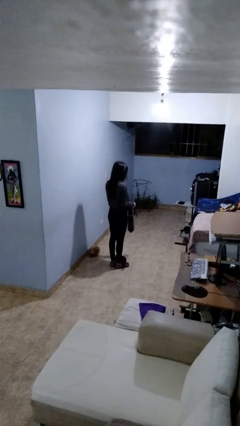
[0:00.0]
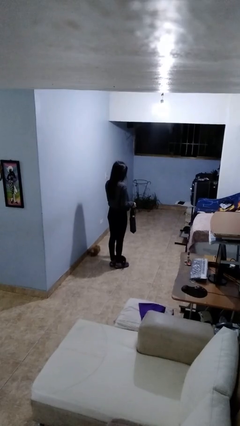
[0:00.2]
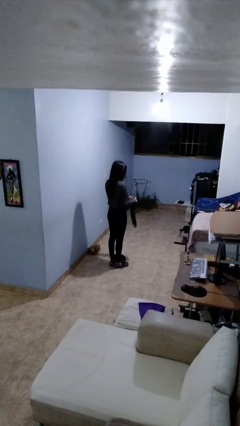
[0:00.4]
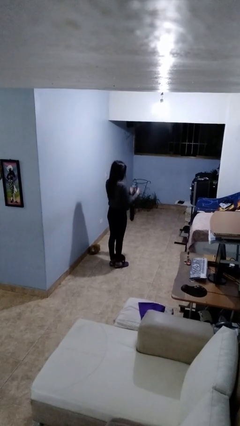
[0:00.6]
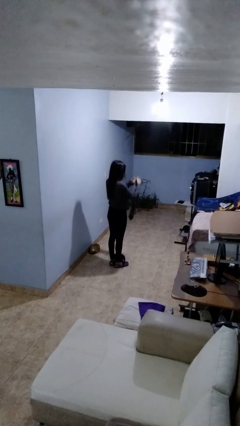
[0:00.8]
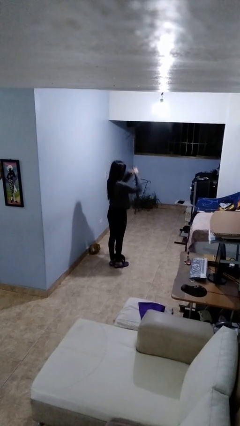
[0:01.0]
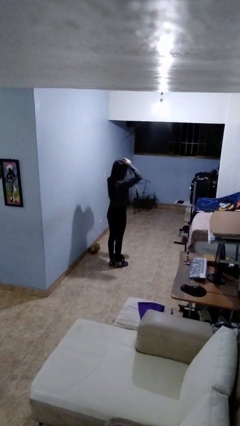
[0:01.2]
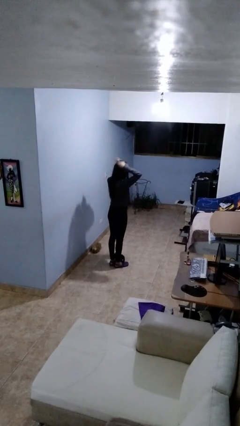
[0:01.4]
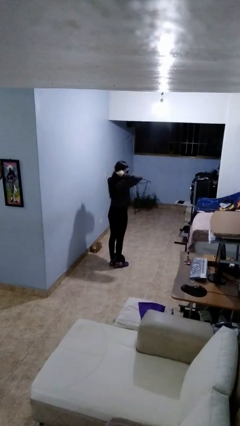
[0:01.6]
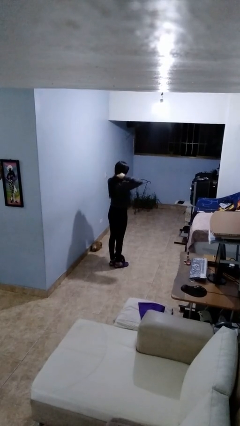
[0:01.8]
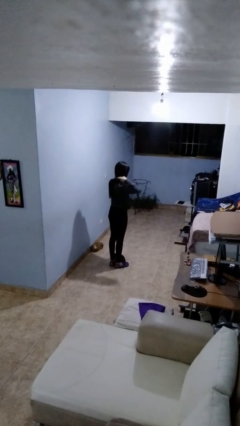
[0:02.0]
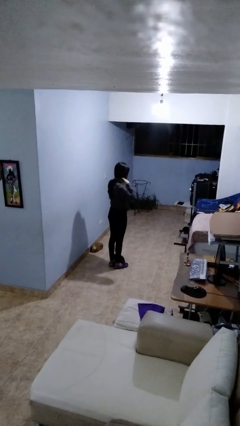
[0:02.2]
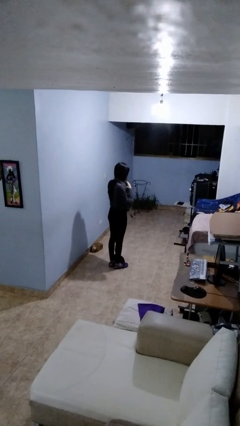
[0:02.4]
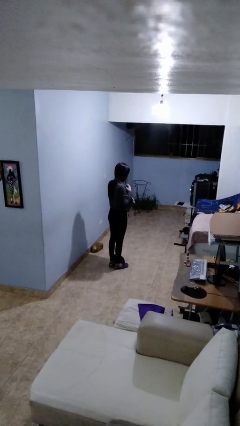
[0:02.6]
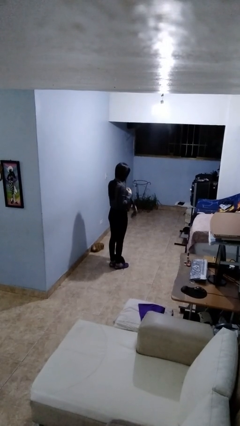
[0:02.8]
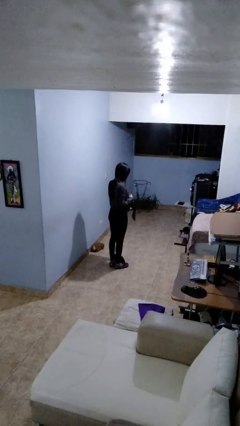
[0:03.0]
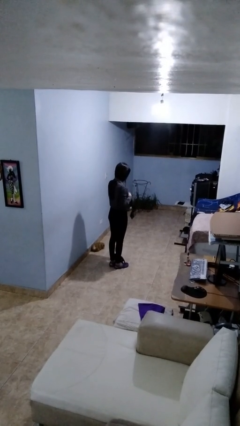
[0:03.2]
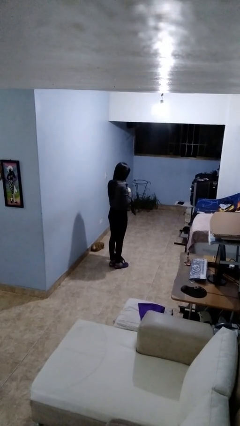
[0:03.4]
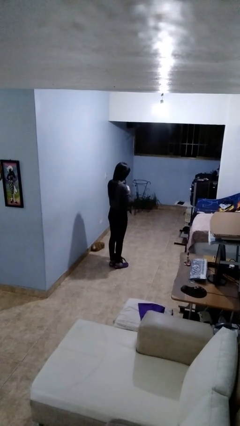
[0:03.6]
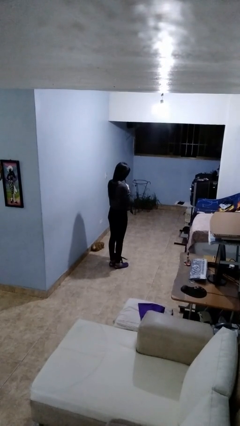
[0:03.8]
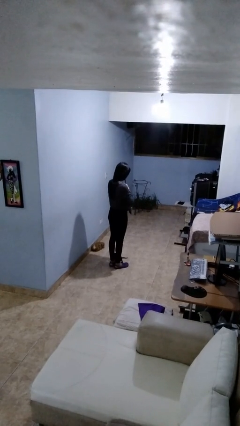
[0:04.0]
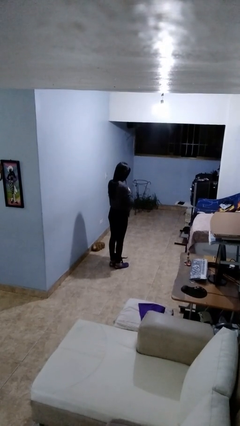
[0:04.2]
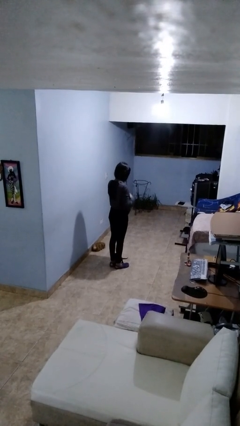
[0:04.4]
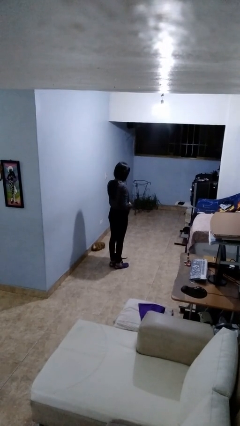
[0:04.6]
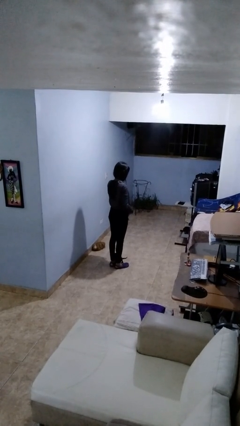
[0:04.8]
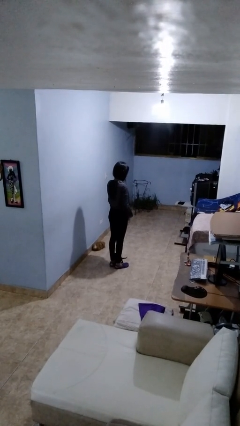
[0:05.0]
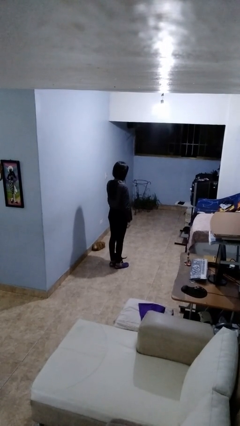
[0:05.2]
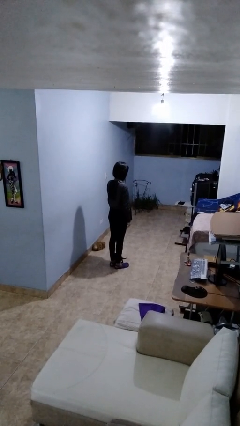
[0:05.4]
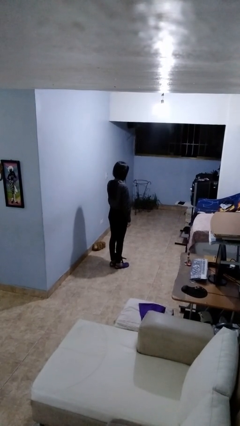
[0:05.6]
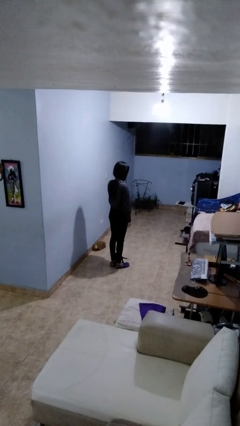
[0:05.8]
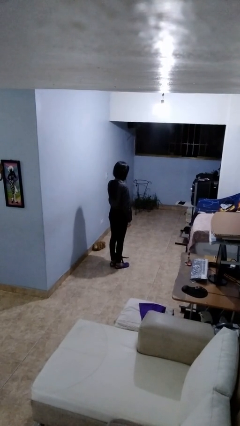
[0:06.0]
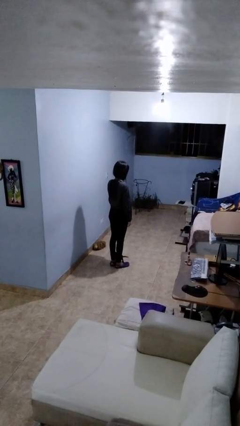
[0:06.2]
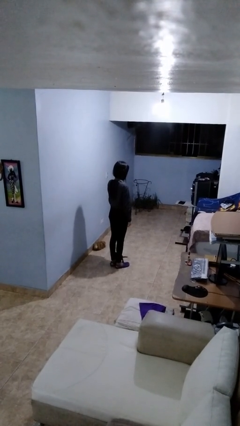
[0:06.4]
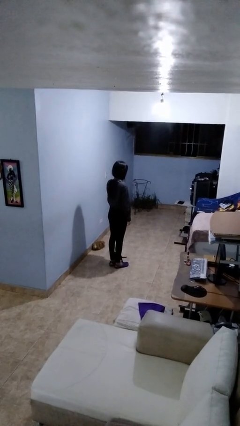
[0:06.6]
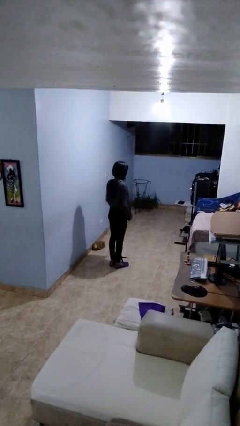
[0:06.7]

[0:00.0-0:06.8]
person puts on necktie

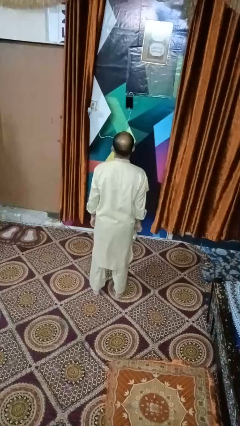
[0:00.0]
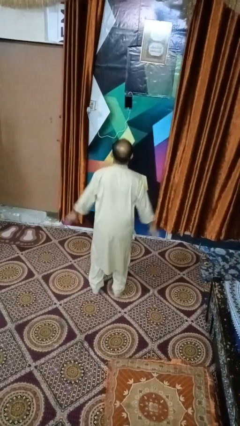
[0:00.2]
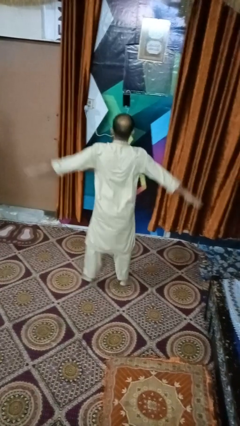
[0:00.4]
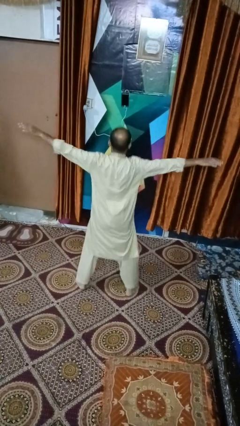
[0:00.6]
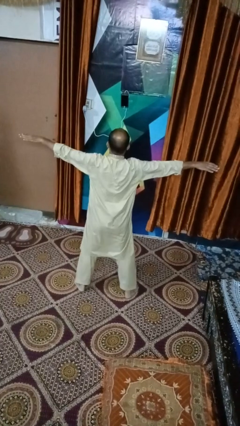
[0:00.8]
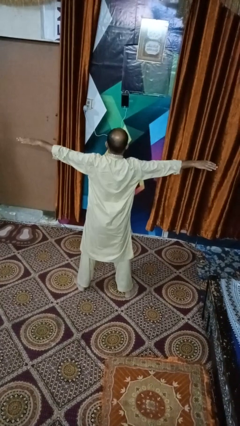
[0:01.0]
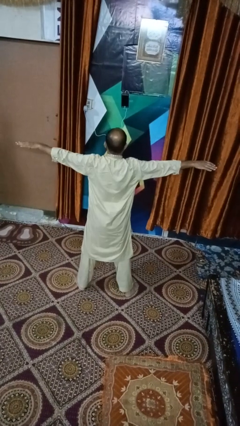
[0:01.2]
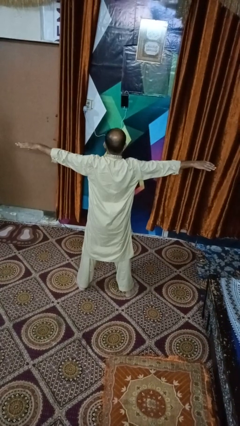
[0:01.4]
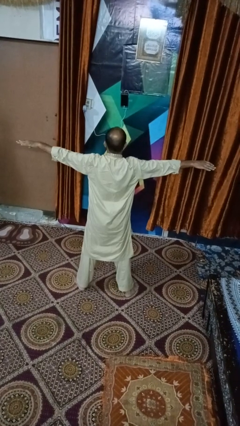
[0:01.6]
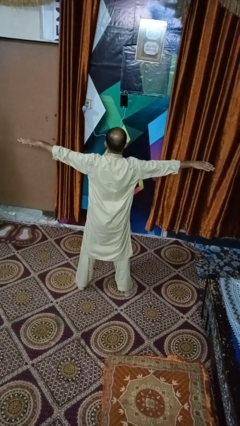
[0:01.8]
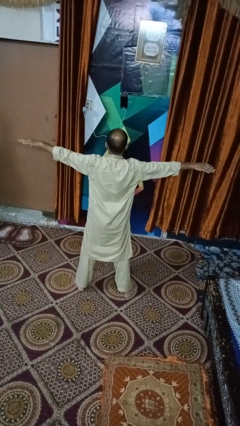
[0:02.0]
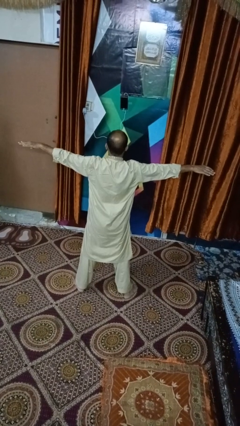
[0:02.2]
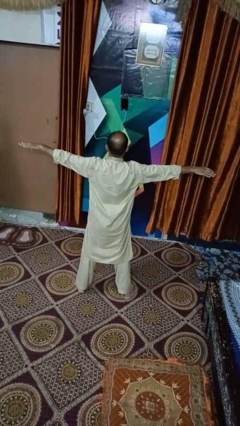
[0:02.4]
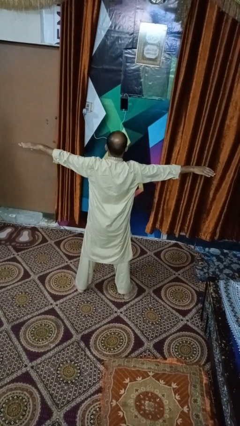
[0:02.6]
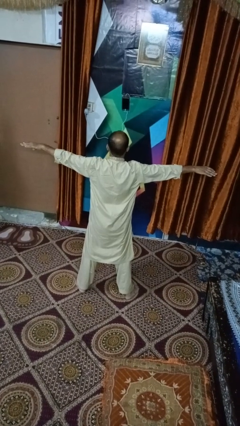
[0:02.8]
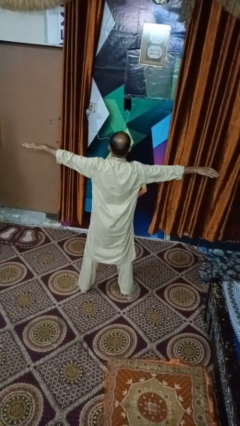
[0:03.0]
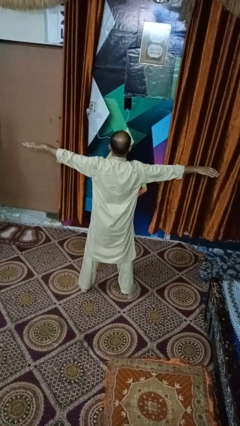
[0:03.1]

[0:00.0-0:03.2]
person exercises with jumping jacks

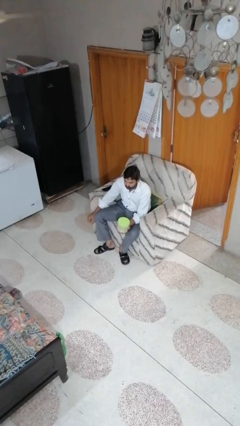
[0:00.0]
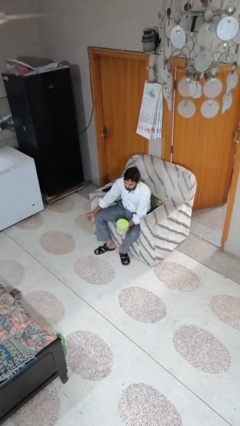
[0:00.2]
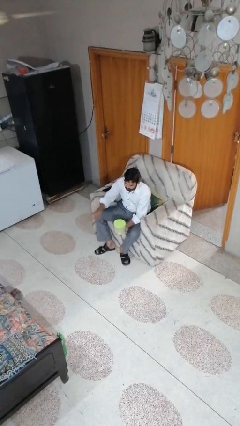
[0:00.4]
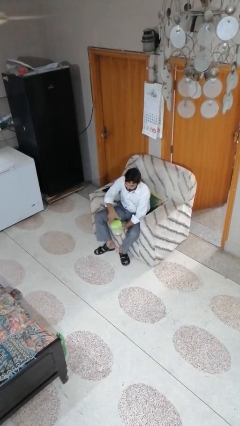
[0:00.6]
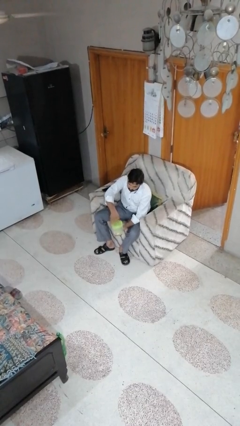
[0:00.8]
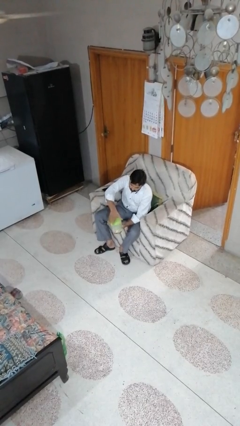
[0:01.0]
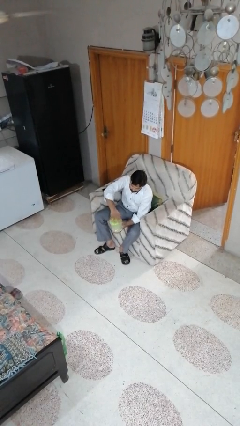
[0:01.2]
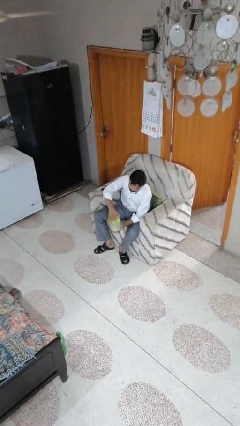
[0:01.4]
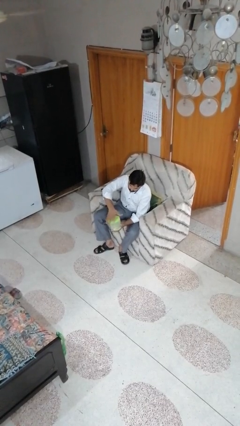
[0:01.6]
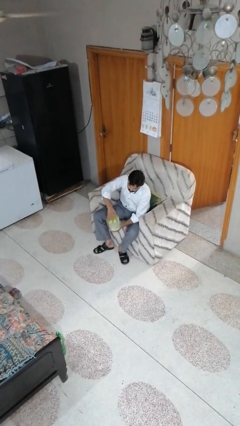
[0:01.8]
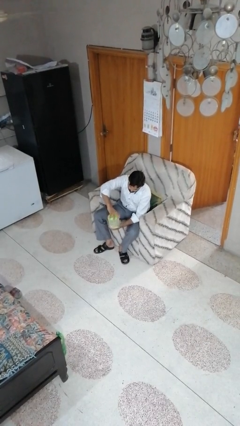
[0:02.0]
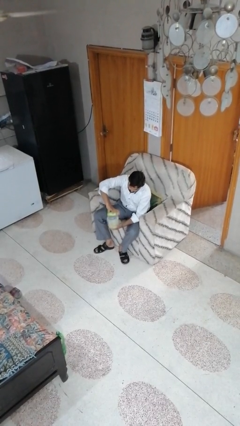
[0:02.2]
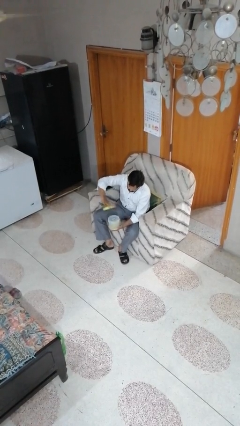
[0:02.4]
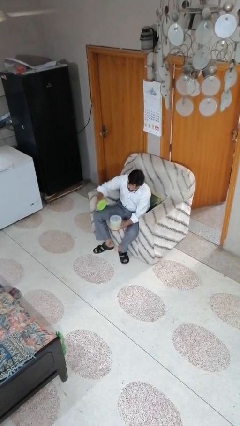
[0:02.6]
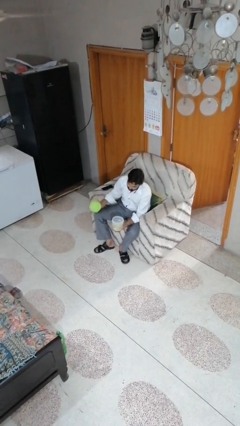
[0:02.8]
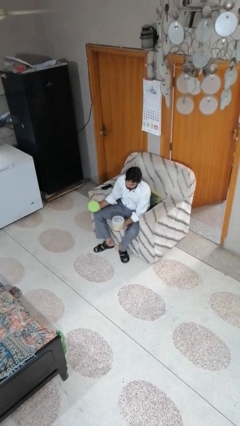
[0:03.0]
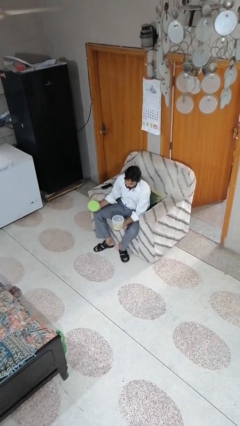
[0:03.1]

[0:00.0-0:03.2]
person opens jar

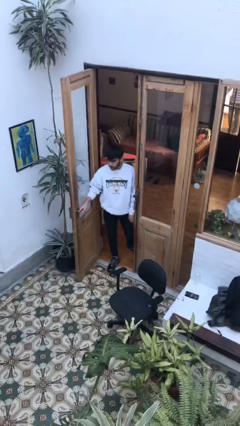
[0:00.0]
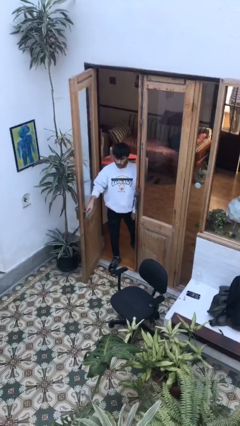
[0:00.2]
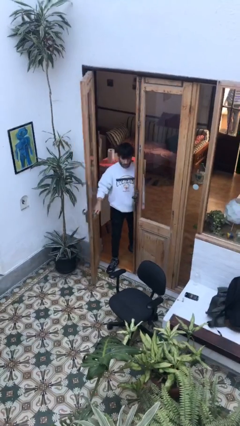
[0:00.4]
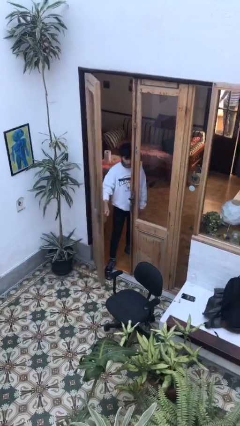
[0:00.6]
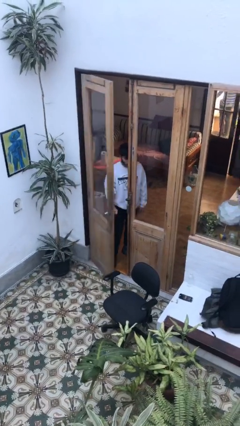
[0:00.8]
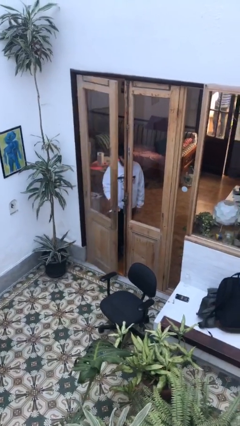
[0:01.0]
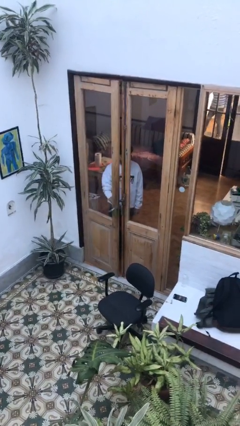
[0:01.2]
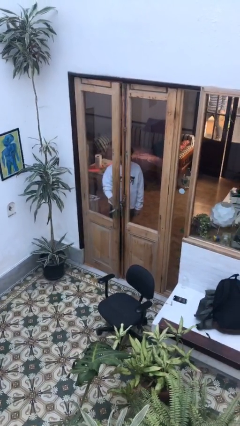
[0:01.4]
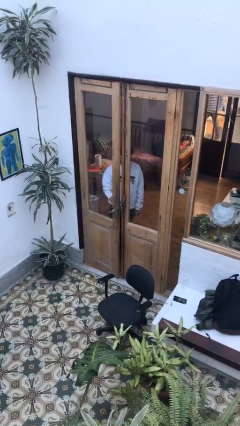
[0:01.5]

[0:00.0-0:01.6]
person closes facility door

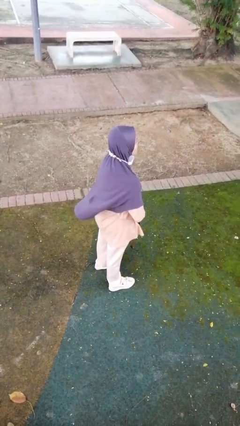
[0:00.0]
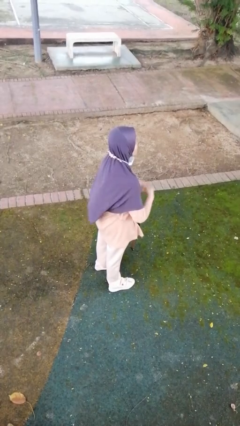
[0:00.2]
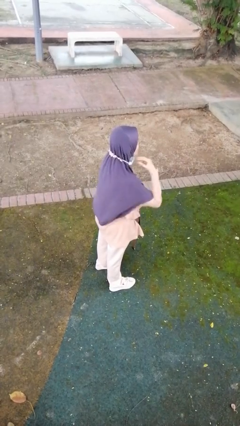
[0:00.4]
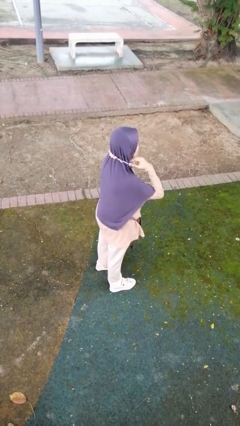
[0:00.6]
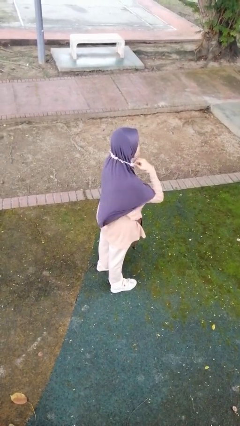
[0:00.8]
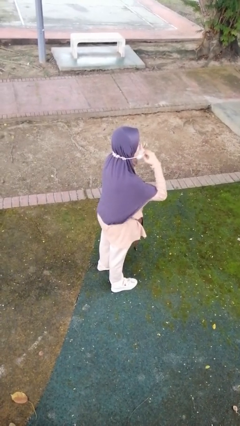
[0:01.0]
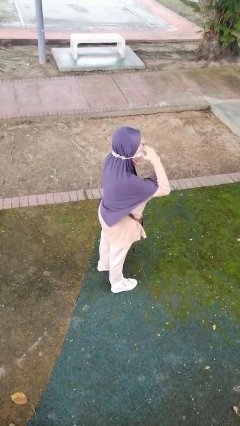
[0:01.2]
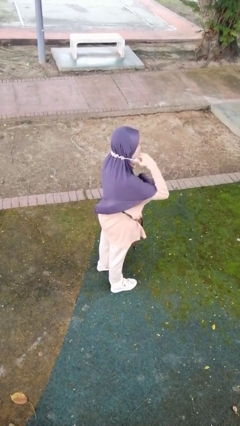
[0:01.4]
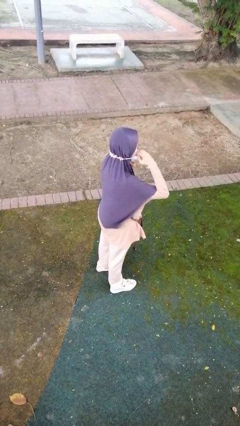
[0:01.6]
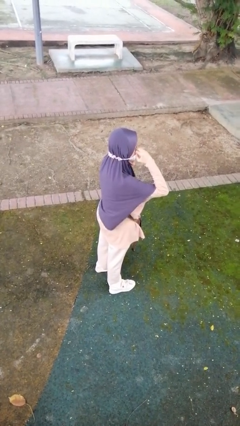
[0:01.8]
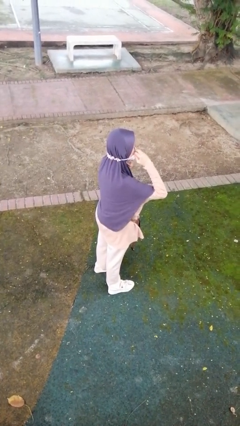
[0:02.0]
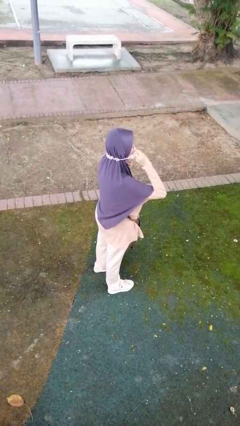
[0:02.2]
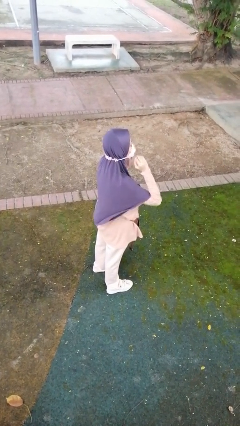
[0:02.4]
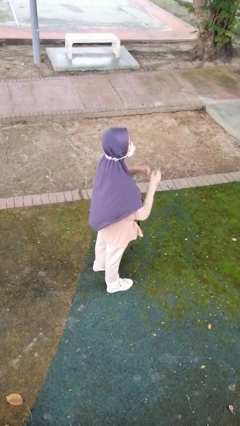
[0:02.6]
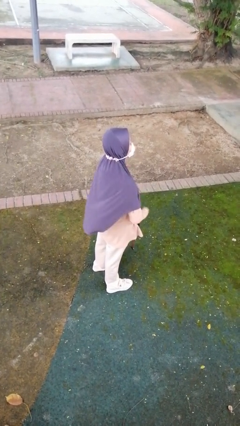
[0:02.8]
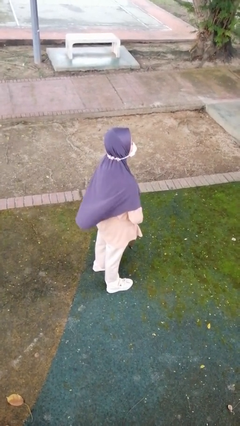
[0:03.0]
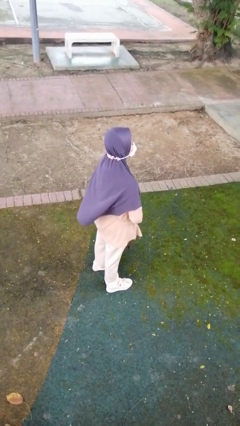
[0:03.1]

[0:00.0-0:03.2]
person puts on facemask
